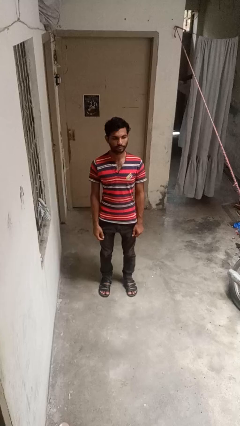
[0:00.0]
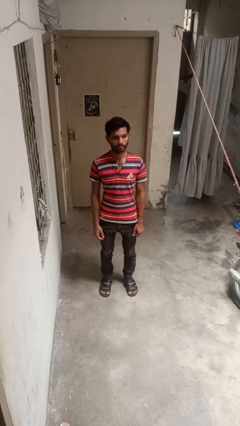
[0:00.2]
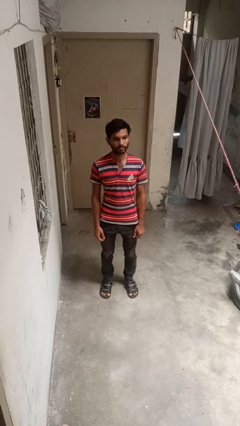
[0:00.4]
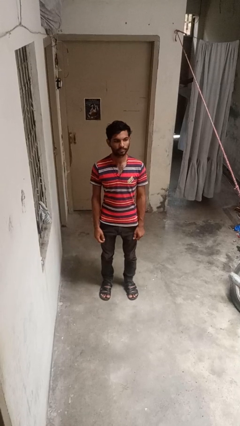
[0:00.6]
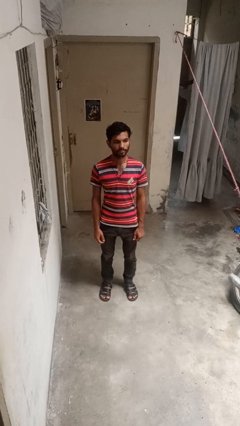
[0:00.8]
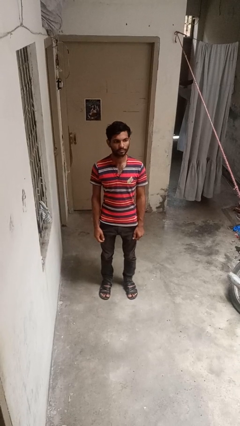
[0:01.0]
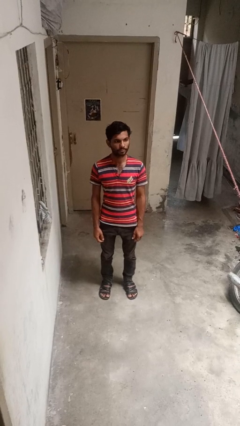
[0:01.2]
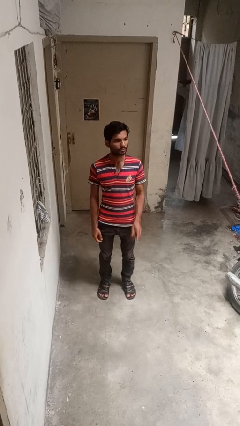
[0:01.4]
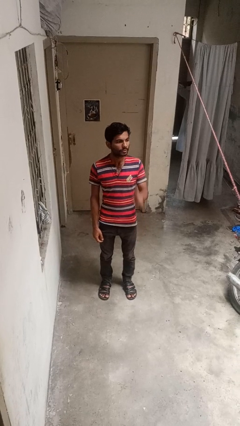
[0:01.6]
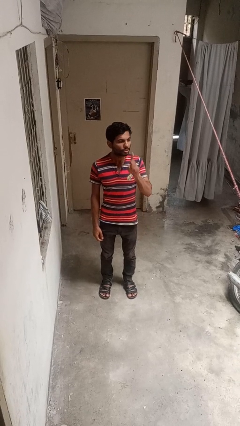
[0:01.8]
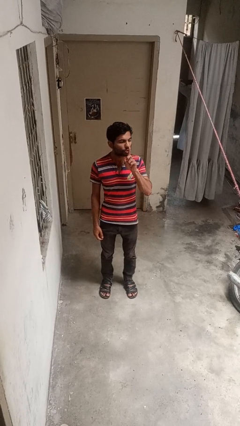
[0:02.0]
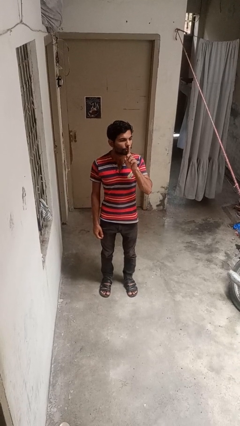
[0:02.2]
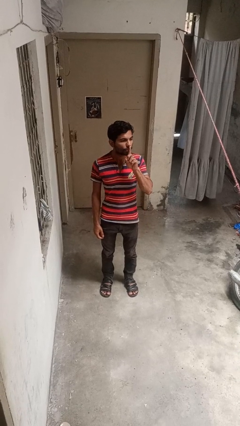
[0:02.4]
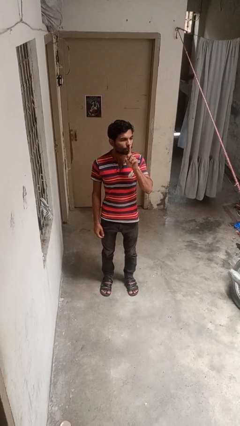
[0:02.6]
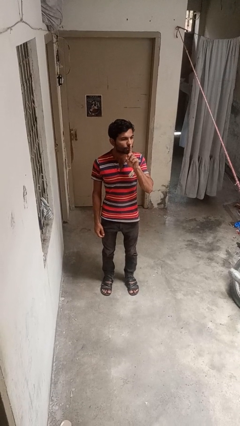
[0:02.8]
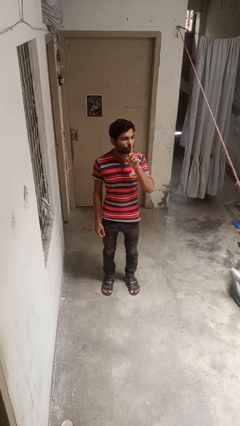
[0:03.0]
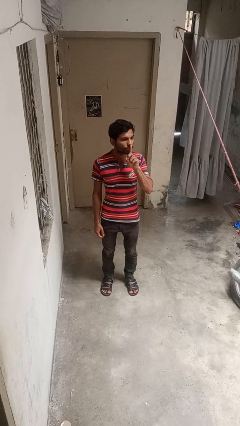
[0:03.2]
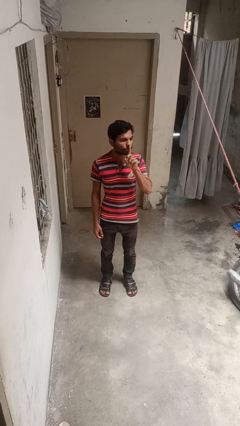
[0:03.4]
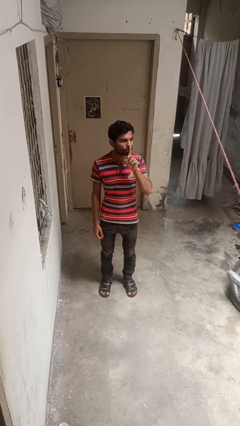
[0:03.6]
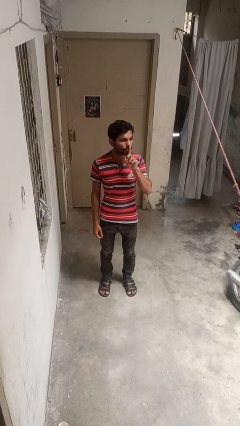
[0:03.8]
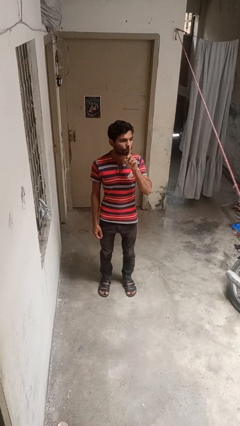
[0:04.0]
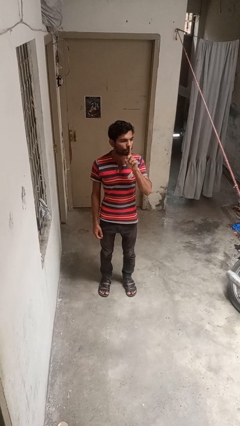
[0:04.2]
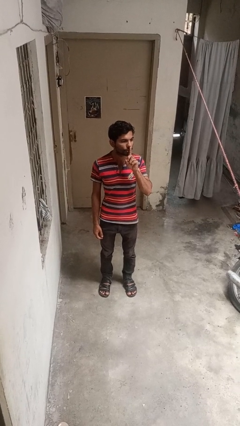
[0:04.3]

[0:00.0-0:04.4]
person gestures be quiet

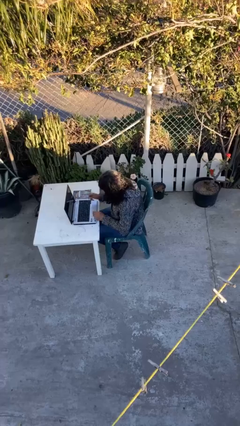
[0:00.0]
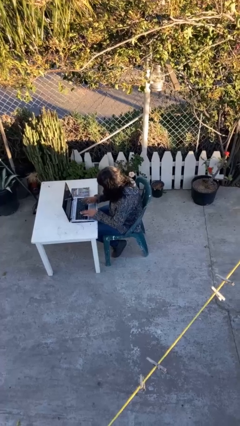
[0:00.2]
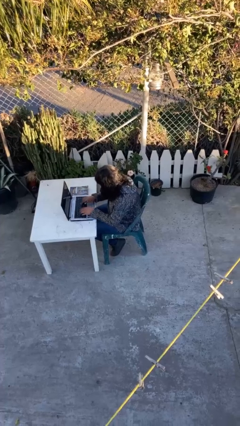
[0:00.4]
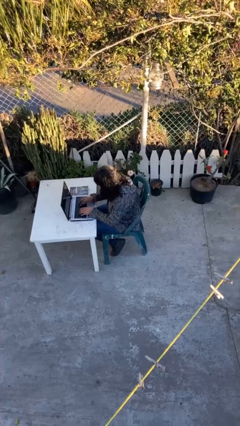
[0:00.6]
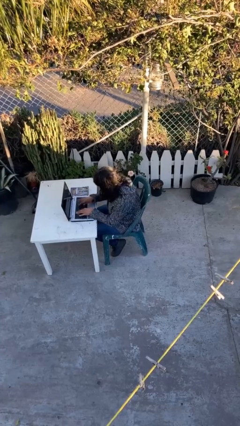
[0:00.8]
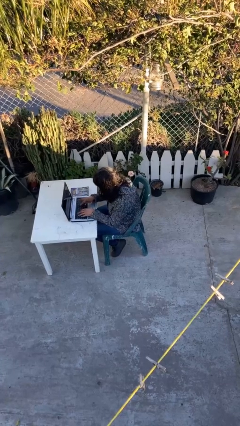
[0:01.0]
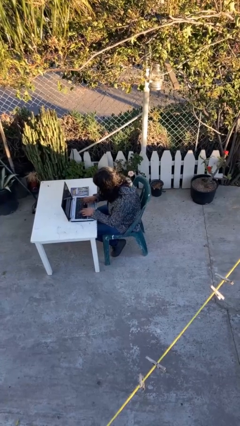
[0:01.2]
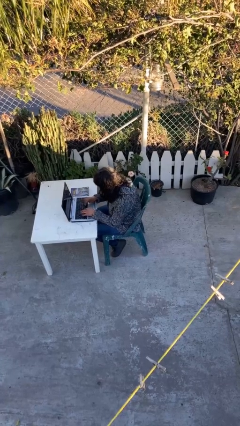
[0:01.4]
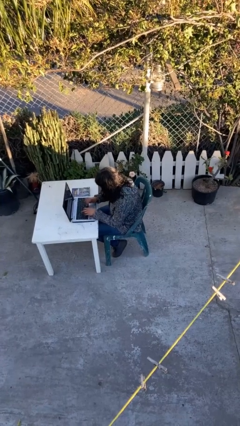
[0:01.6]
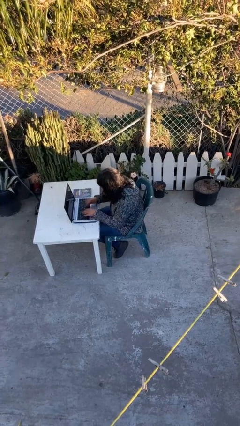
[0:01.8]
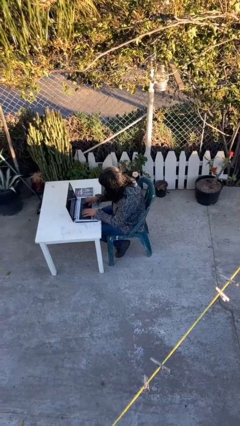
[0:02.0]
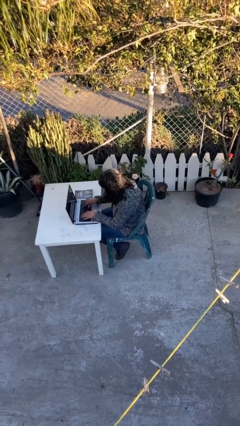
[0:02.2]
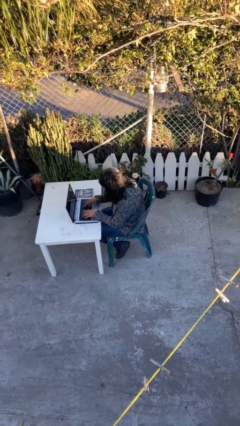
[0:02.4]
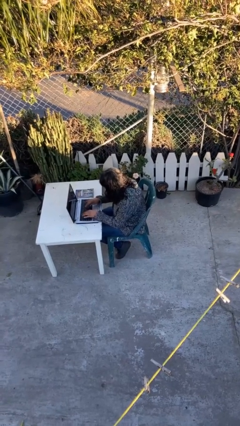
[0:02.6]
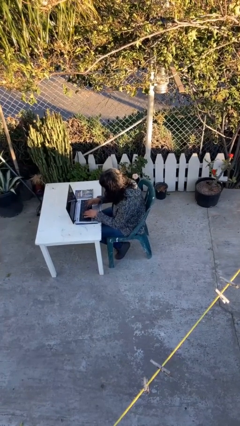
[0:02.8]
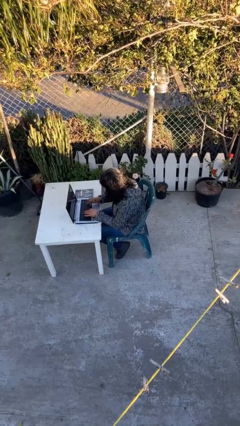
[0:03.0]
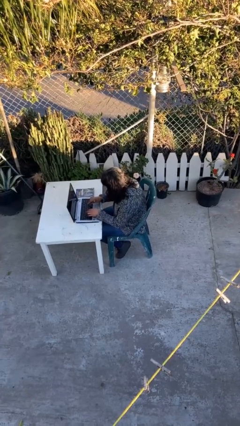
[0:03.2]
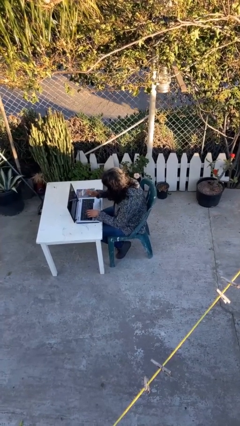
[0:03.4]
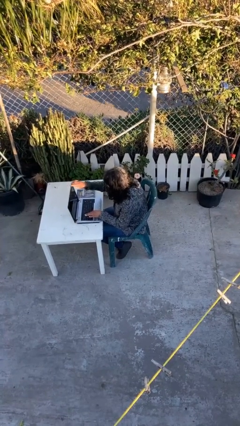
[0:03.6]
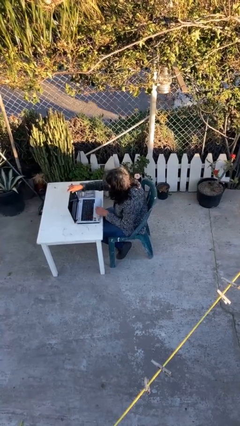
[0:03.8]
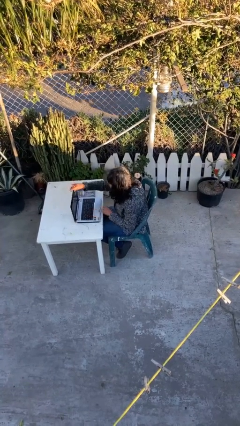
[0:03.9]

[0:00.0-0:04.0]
person interacts with laptop

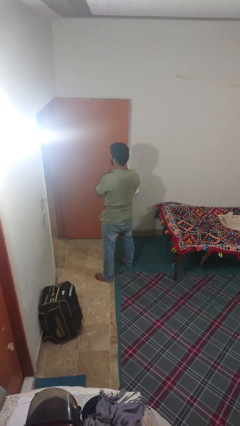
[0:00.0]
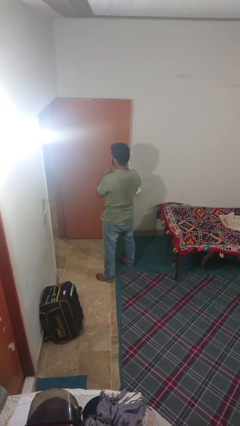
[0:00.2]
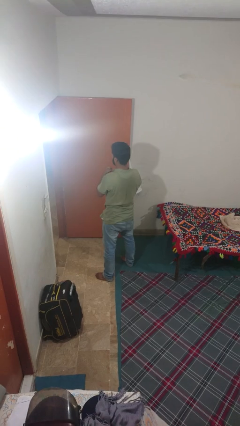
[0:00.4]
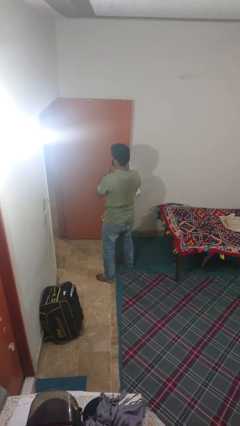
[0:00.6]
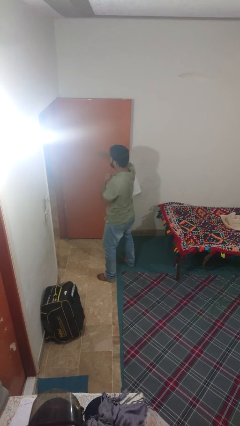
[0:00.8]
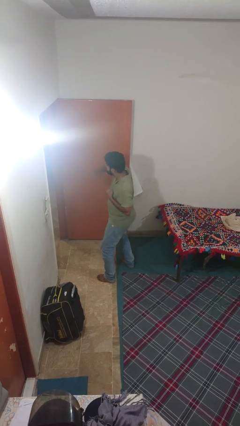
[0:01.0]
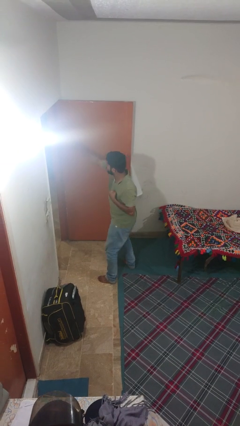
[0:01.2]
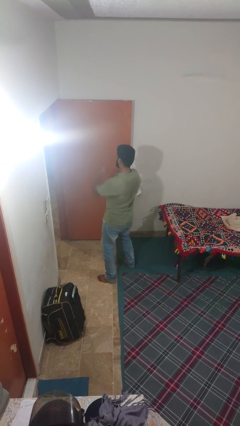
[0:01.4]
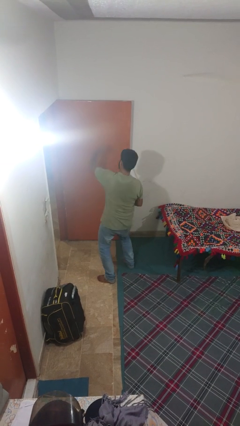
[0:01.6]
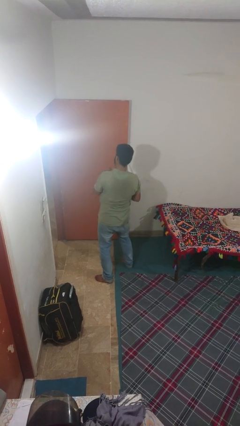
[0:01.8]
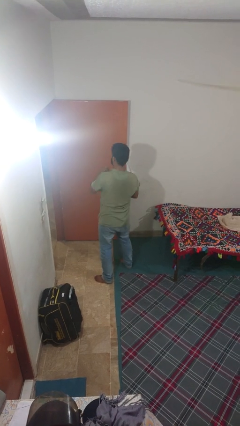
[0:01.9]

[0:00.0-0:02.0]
person punches

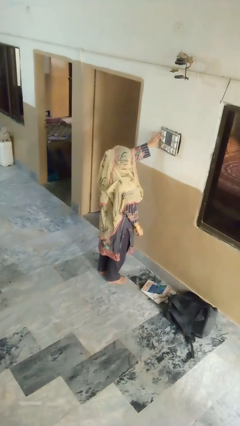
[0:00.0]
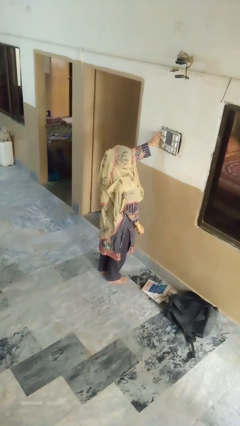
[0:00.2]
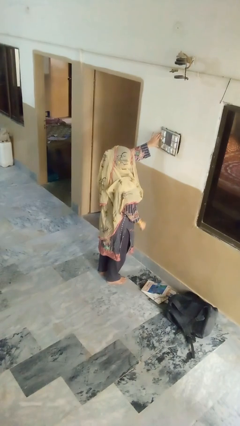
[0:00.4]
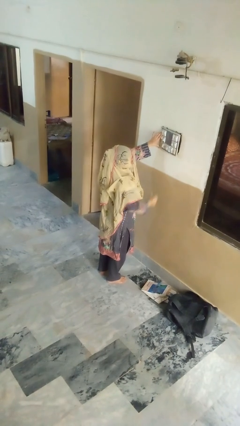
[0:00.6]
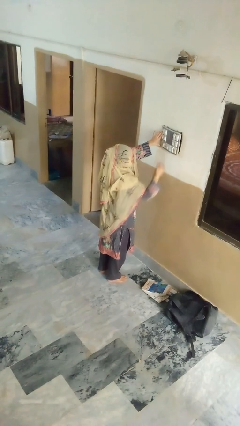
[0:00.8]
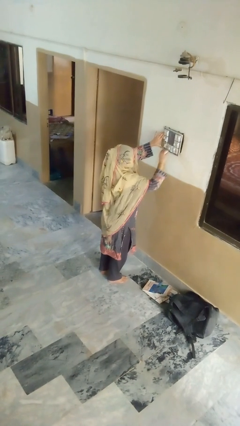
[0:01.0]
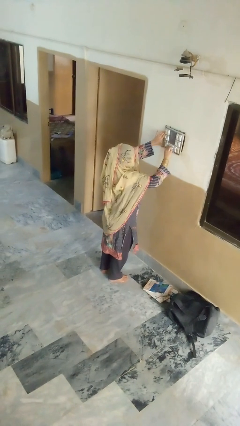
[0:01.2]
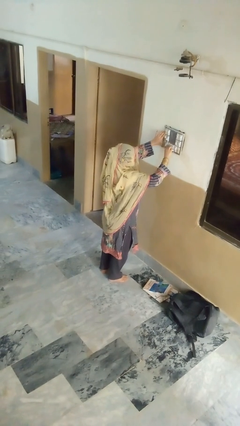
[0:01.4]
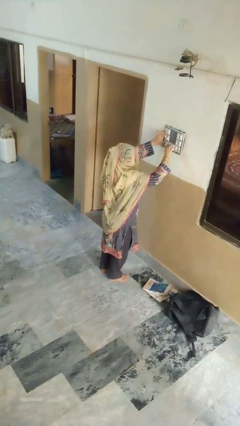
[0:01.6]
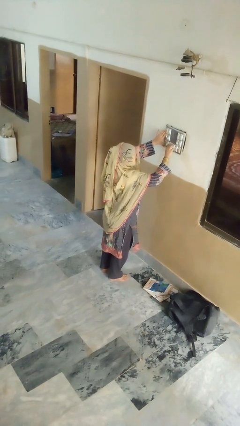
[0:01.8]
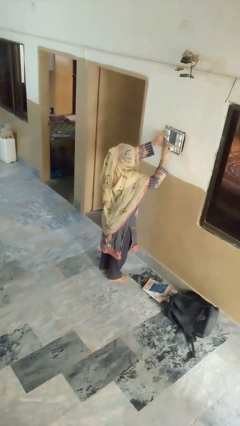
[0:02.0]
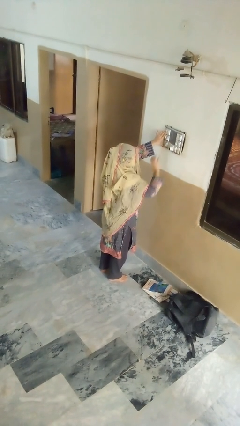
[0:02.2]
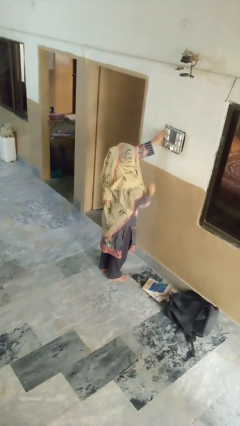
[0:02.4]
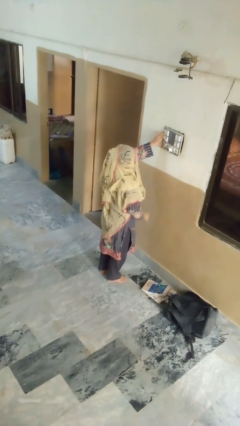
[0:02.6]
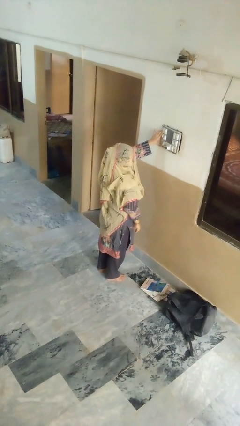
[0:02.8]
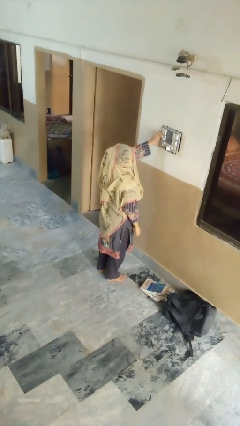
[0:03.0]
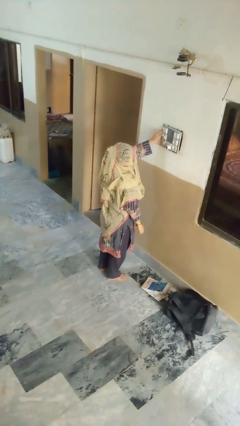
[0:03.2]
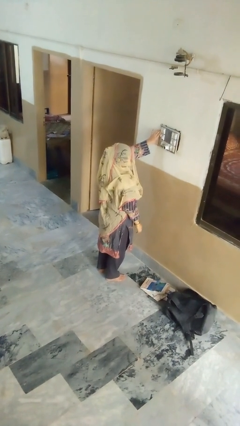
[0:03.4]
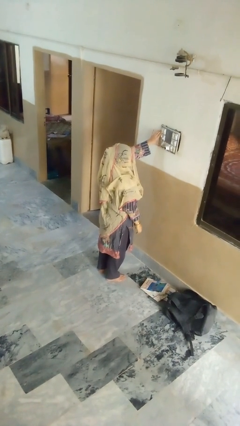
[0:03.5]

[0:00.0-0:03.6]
person plugs into electrical socket

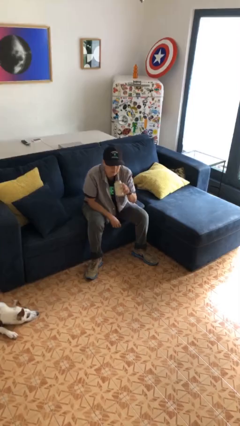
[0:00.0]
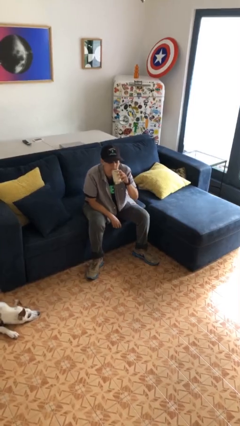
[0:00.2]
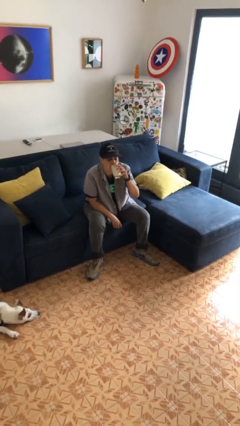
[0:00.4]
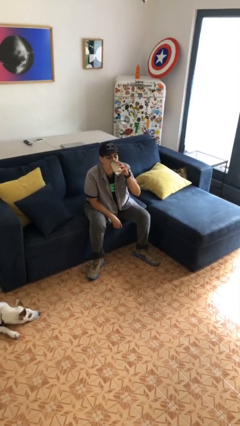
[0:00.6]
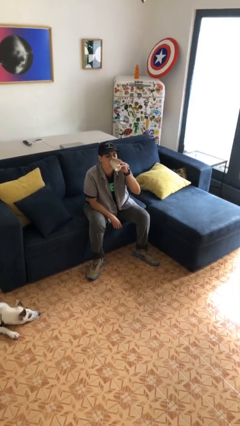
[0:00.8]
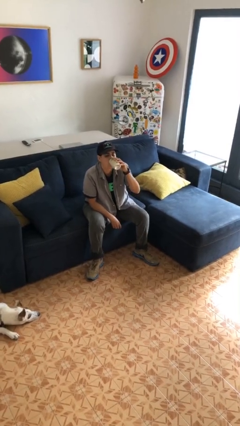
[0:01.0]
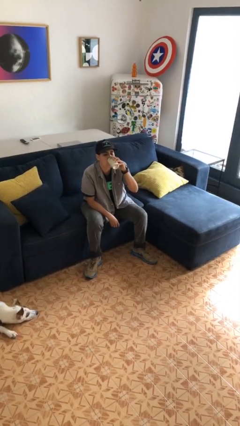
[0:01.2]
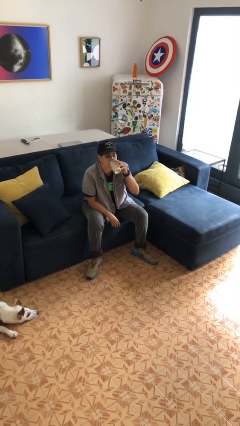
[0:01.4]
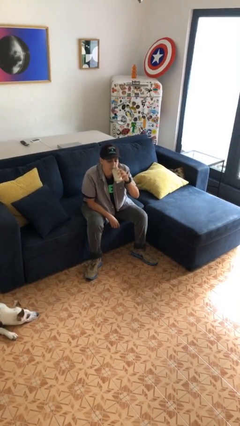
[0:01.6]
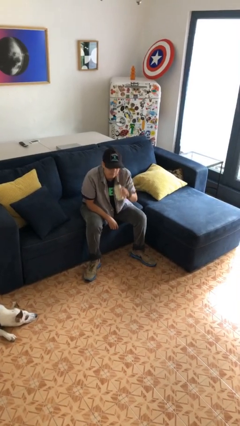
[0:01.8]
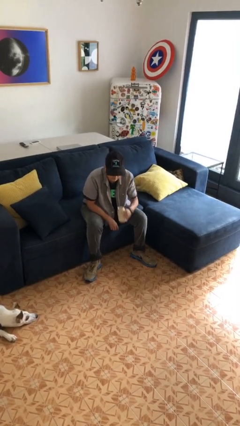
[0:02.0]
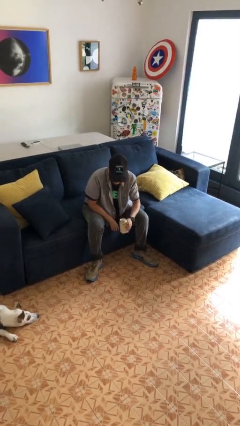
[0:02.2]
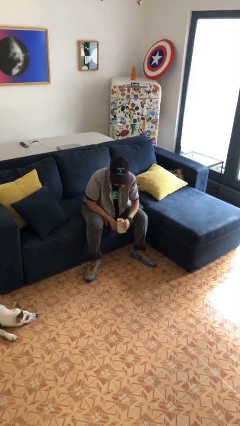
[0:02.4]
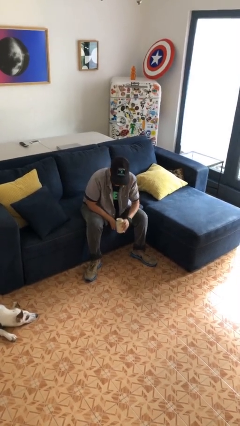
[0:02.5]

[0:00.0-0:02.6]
person drinks from beverage can

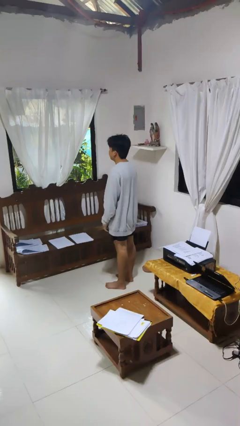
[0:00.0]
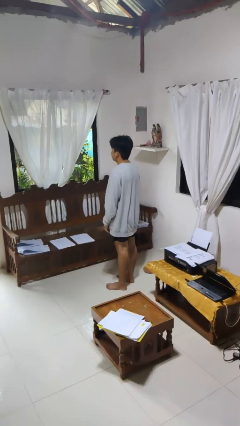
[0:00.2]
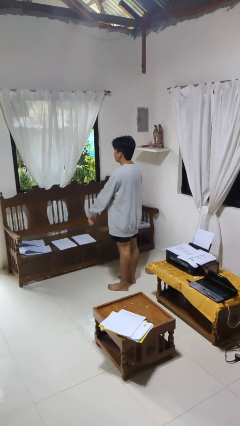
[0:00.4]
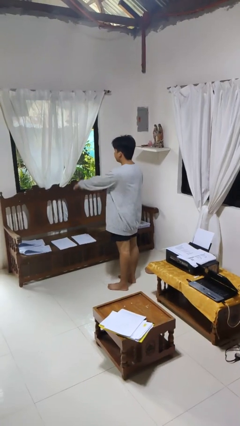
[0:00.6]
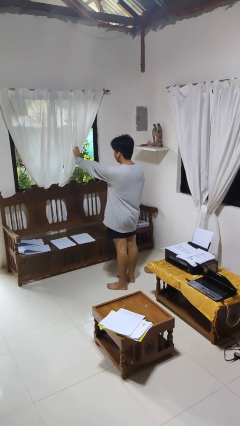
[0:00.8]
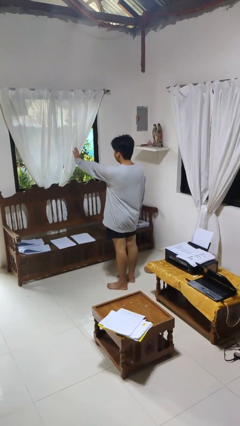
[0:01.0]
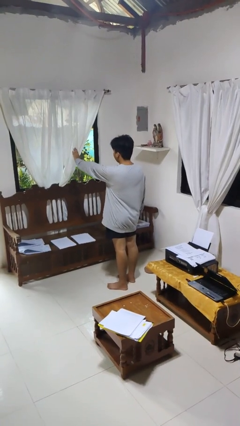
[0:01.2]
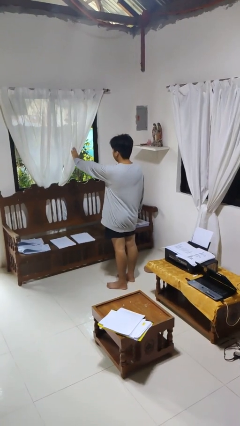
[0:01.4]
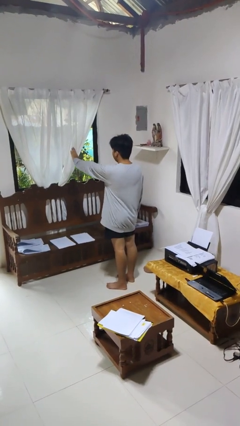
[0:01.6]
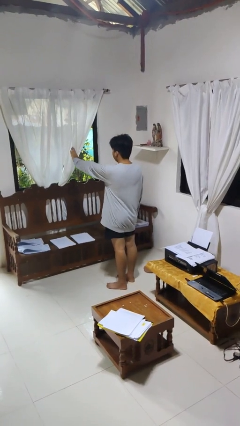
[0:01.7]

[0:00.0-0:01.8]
person gestures stop
